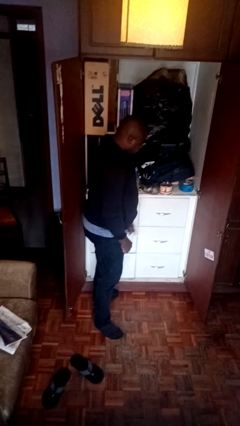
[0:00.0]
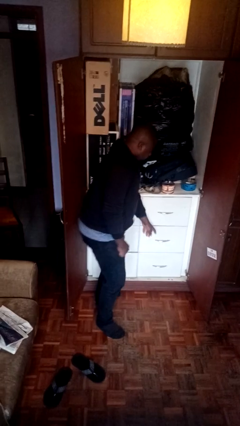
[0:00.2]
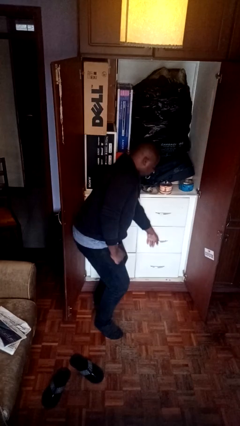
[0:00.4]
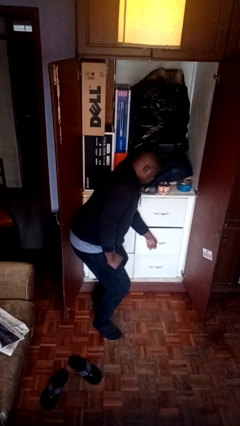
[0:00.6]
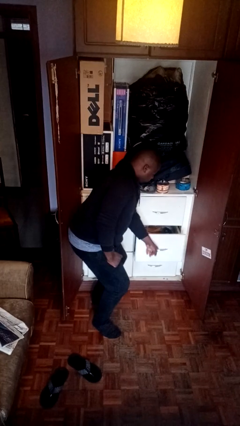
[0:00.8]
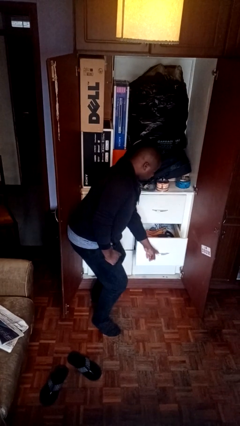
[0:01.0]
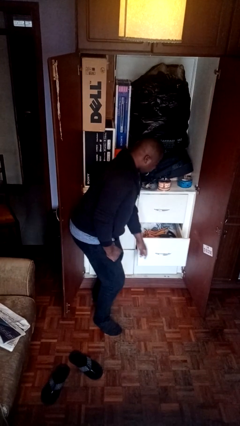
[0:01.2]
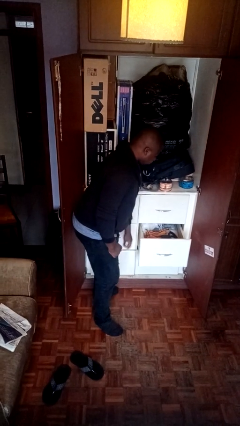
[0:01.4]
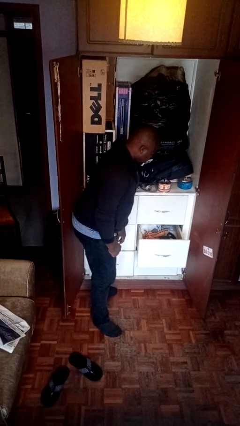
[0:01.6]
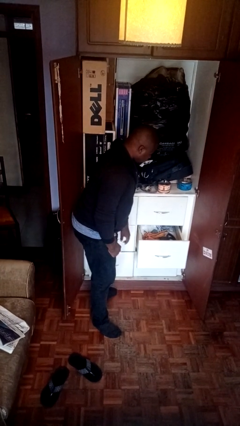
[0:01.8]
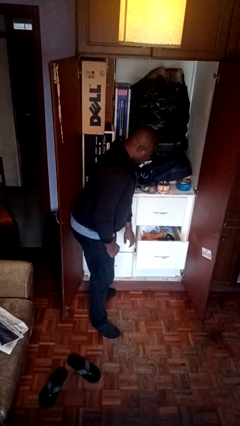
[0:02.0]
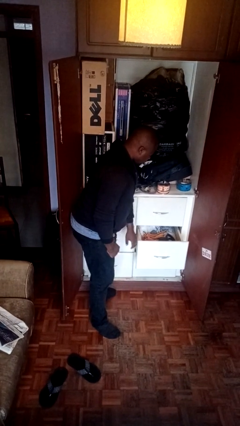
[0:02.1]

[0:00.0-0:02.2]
person opens dresser drawer

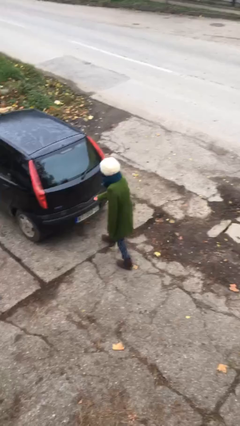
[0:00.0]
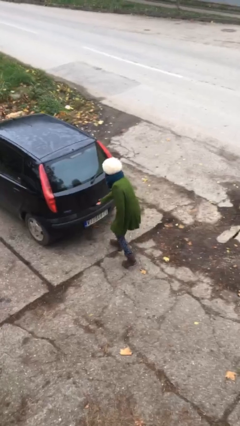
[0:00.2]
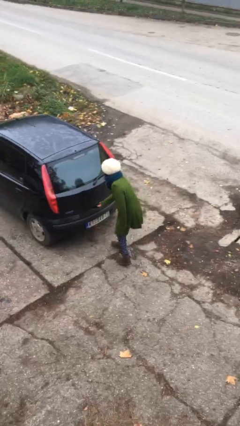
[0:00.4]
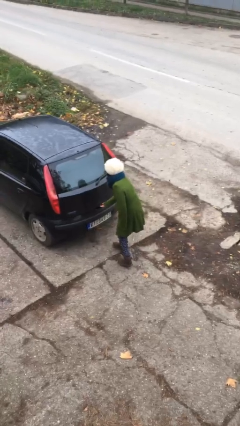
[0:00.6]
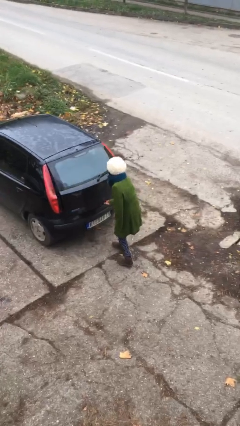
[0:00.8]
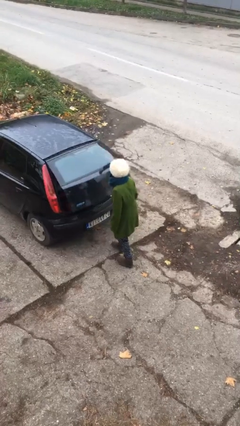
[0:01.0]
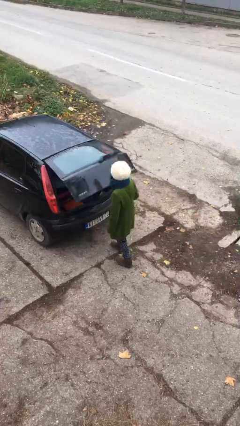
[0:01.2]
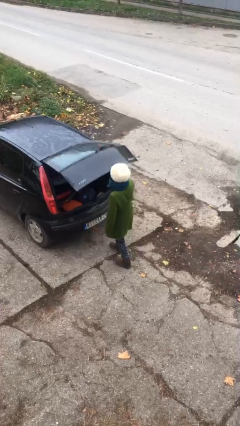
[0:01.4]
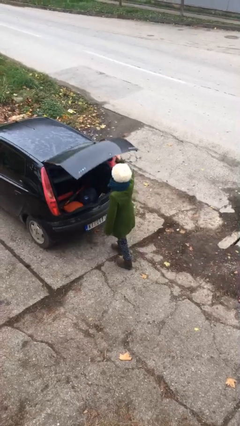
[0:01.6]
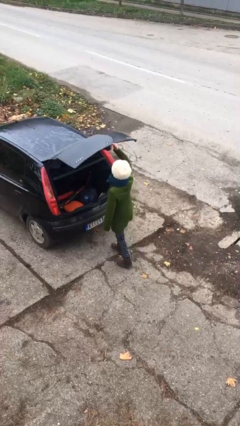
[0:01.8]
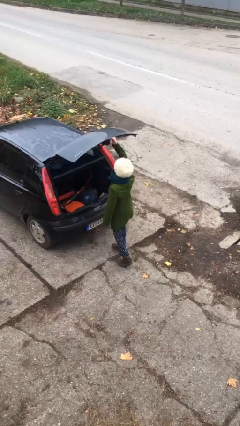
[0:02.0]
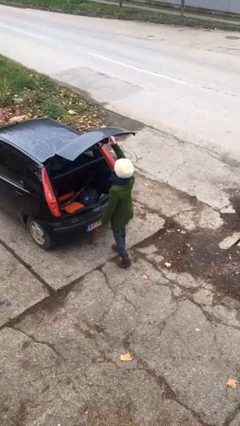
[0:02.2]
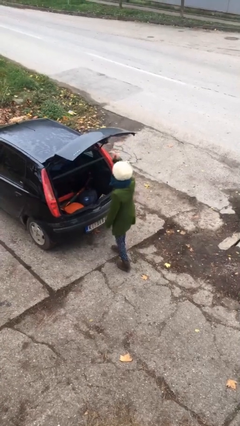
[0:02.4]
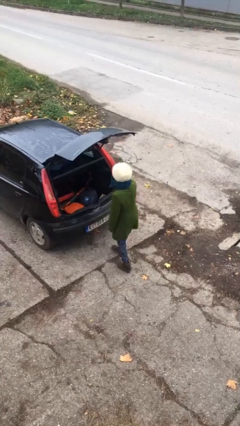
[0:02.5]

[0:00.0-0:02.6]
person opens car trunk

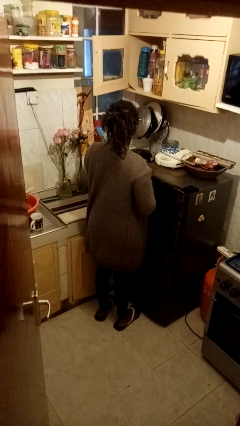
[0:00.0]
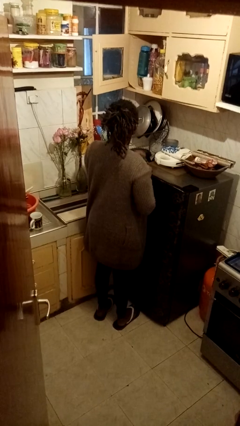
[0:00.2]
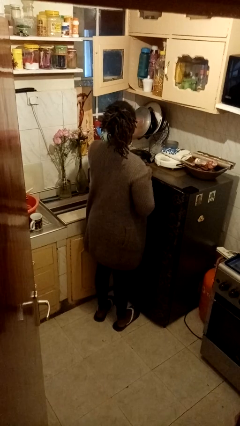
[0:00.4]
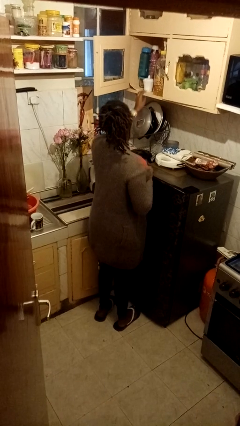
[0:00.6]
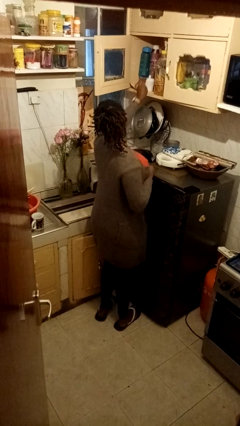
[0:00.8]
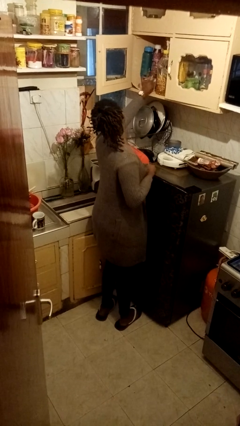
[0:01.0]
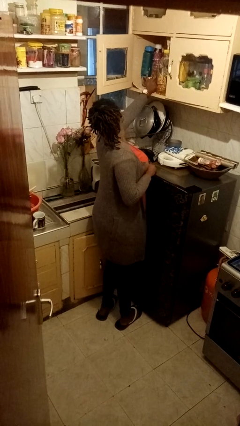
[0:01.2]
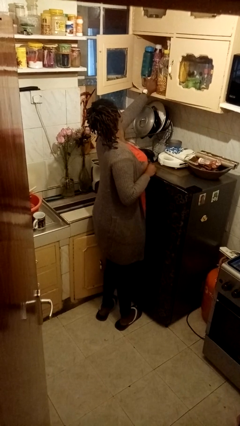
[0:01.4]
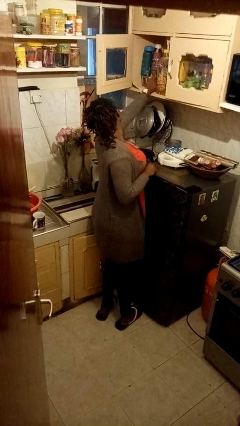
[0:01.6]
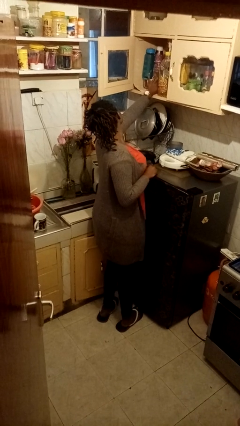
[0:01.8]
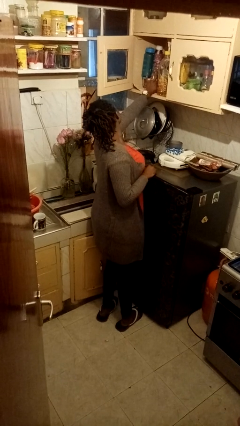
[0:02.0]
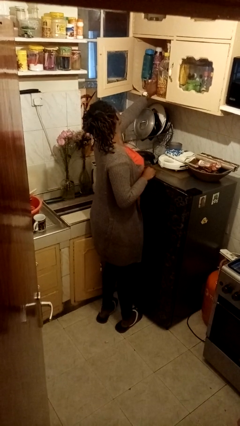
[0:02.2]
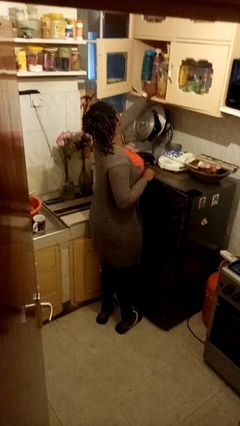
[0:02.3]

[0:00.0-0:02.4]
person searches in cabinet

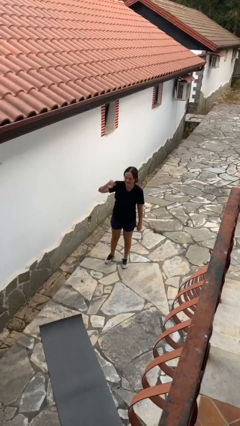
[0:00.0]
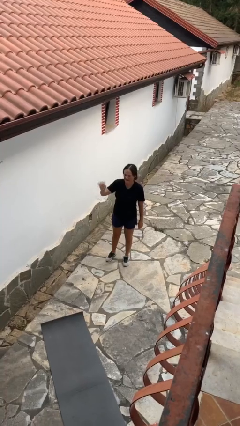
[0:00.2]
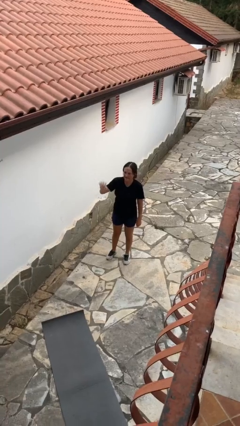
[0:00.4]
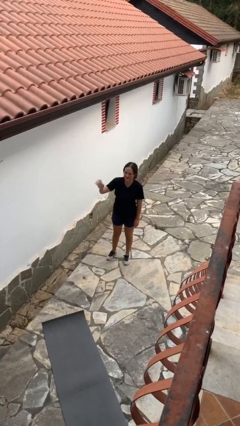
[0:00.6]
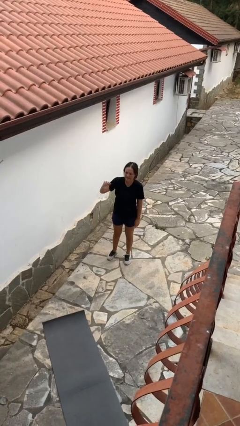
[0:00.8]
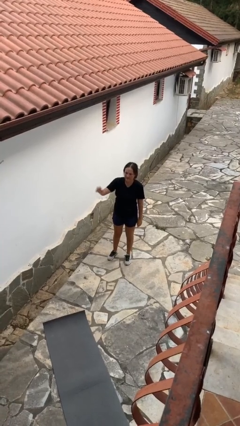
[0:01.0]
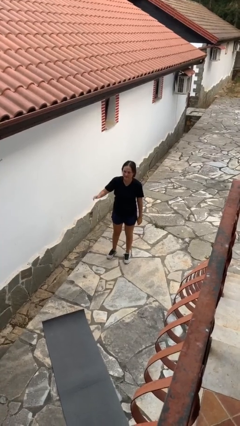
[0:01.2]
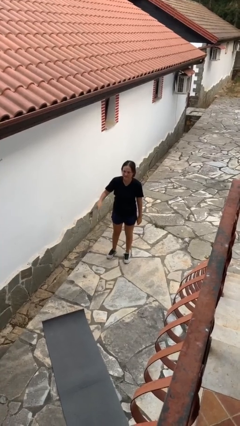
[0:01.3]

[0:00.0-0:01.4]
person gestures lower hand

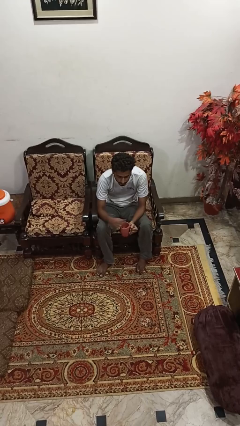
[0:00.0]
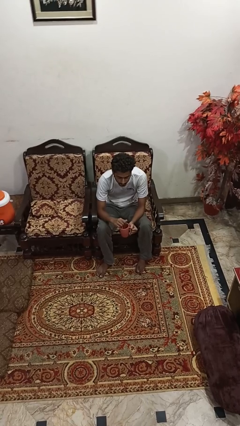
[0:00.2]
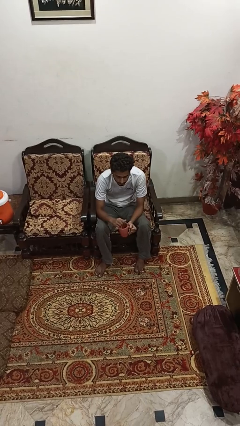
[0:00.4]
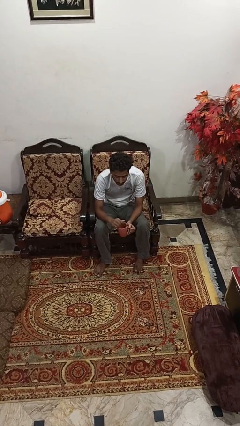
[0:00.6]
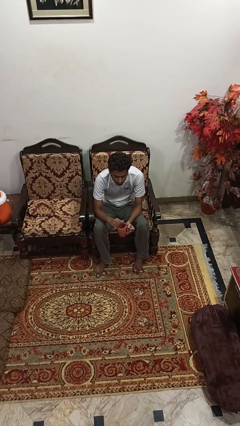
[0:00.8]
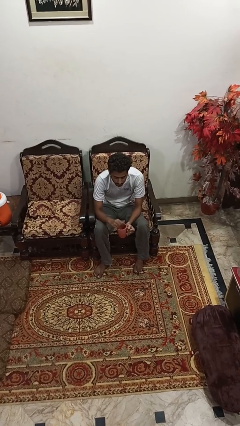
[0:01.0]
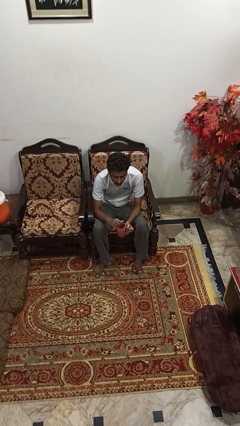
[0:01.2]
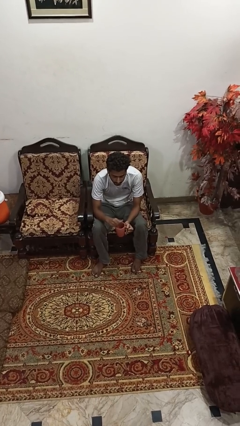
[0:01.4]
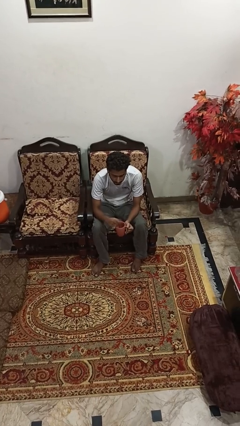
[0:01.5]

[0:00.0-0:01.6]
person stirs mug

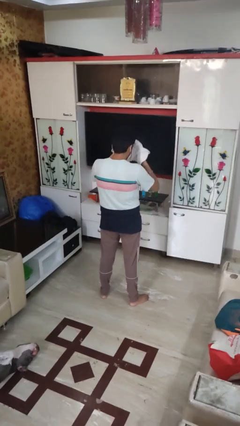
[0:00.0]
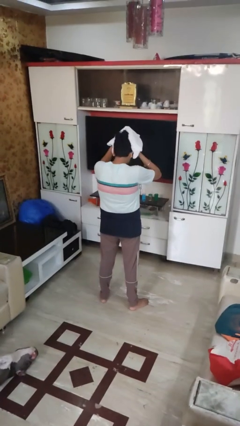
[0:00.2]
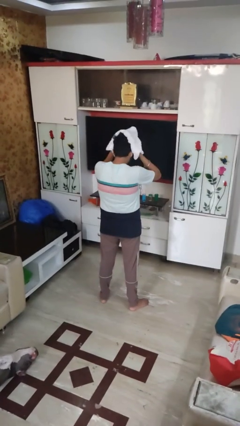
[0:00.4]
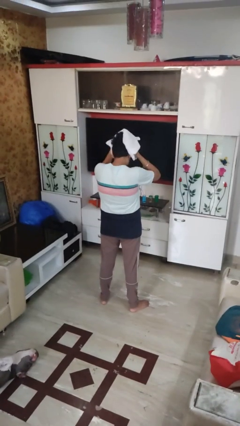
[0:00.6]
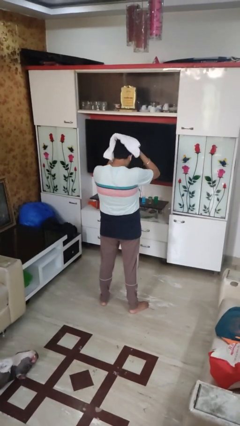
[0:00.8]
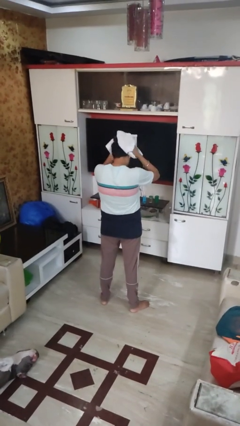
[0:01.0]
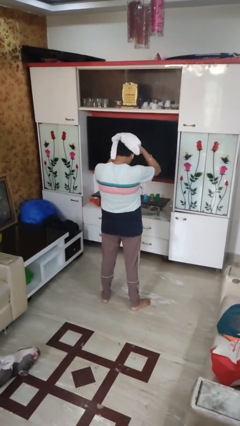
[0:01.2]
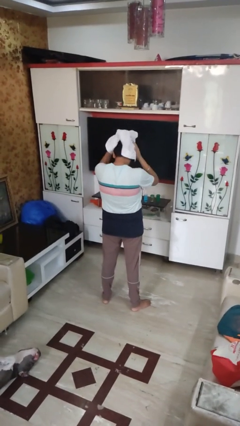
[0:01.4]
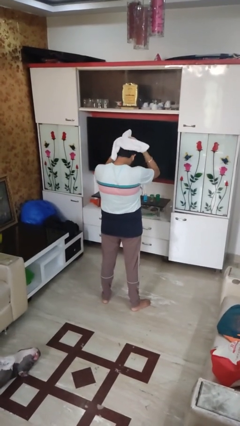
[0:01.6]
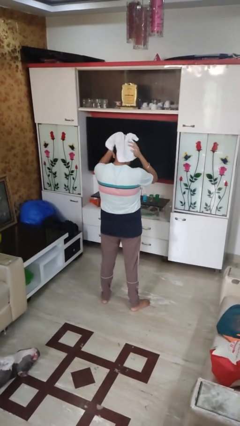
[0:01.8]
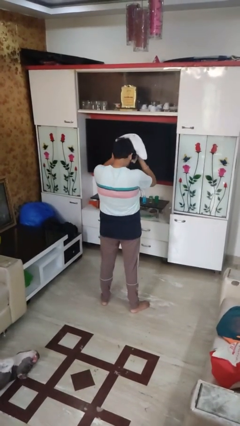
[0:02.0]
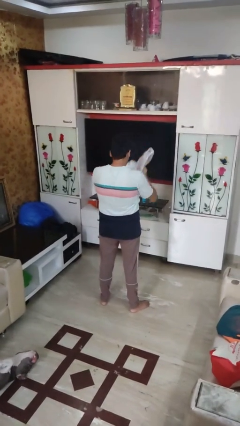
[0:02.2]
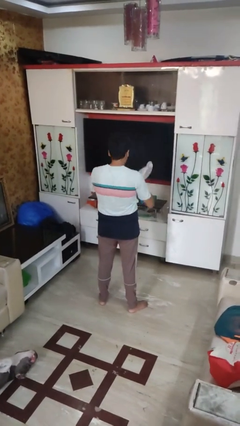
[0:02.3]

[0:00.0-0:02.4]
person dries hair with towel

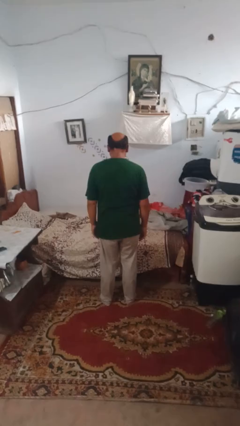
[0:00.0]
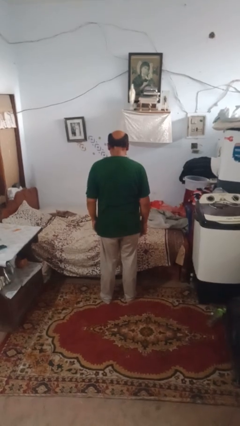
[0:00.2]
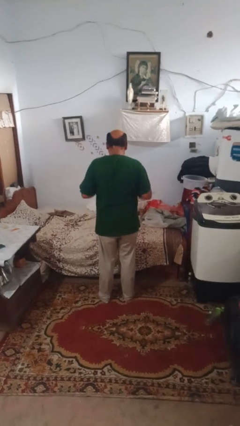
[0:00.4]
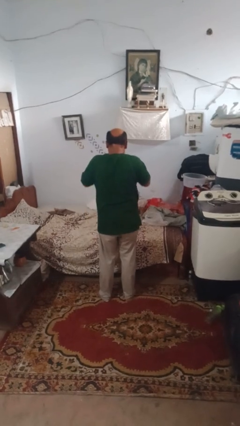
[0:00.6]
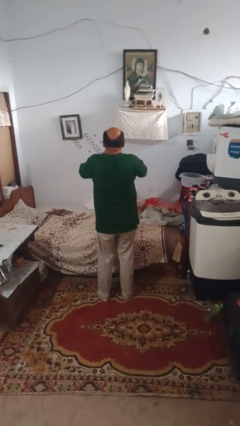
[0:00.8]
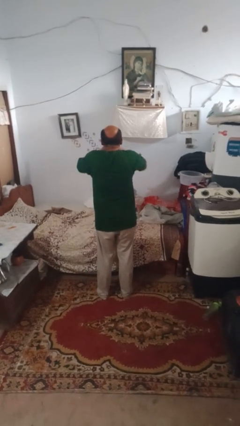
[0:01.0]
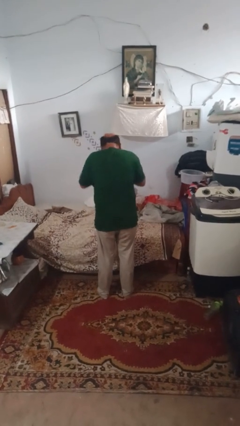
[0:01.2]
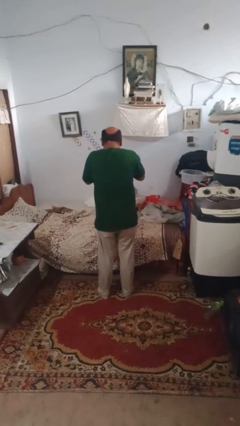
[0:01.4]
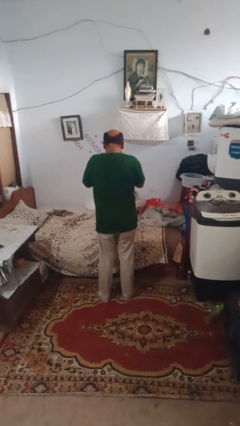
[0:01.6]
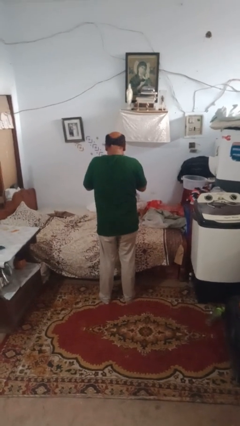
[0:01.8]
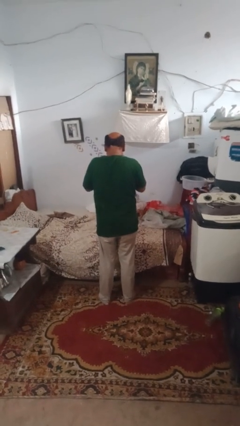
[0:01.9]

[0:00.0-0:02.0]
person sneezes into hand

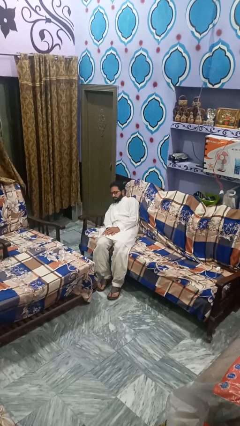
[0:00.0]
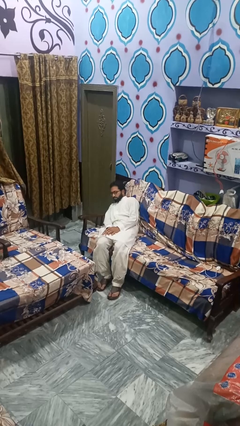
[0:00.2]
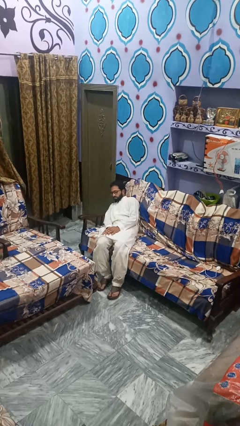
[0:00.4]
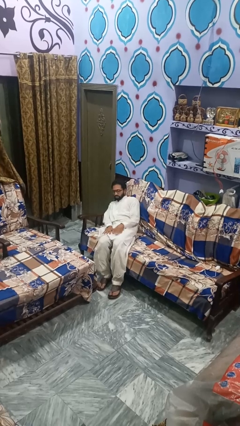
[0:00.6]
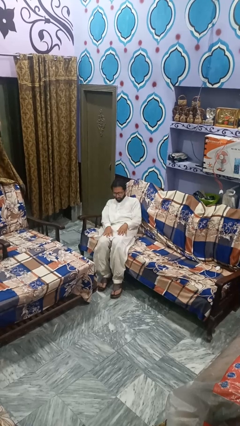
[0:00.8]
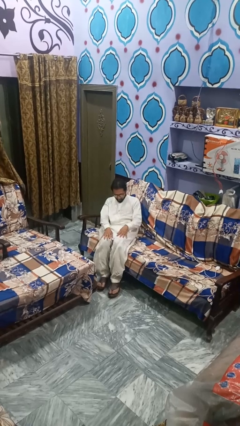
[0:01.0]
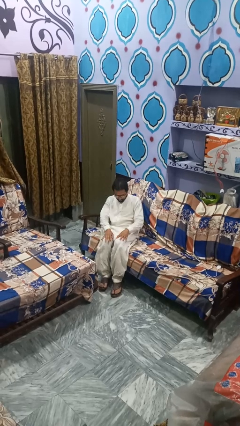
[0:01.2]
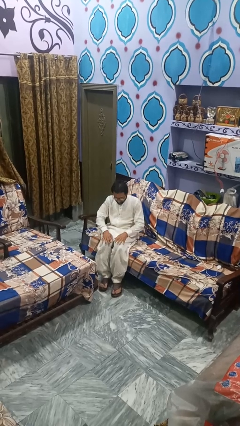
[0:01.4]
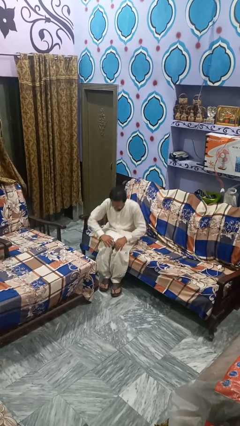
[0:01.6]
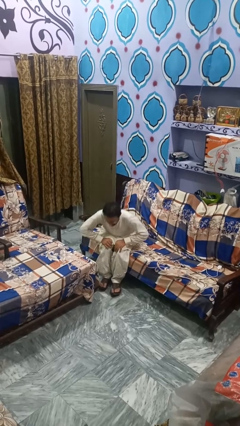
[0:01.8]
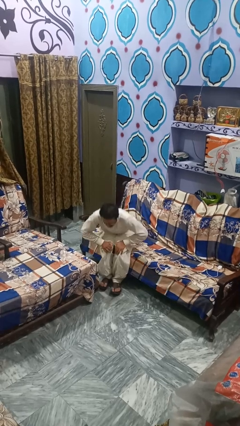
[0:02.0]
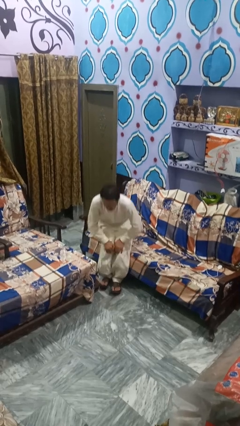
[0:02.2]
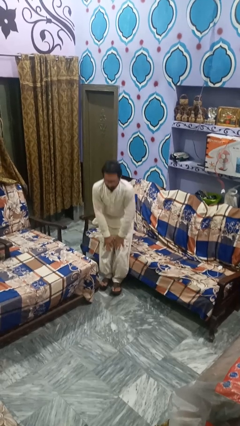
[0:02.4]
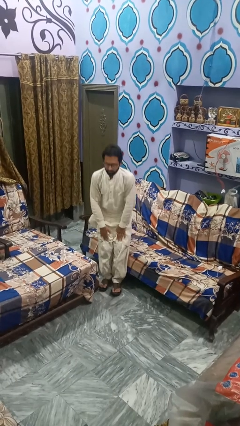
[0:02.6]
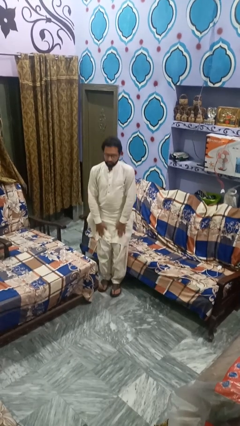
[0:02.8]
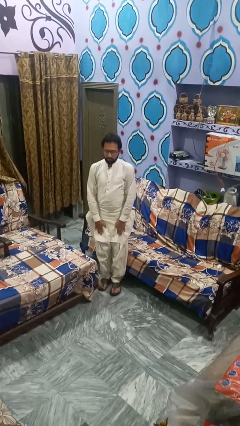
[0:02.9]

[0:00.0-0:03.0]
person stands up
